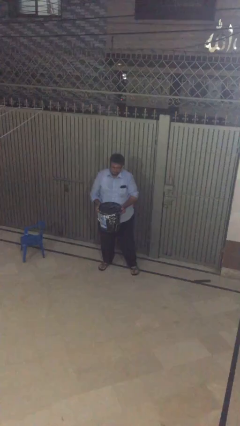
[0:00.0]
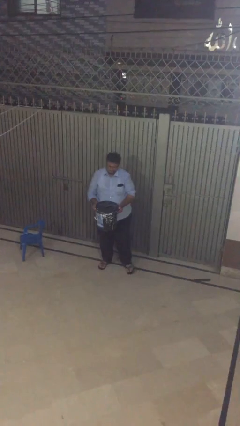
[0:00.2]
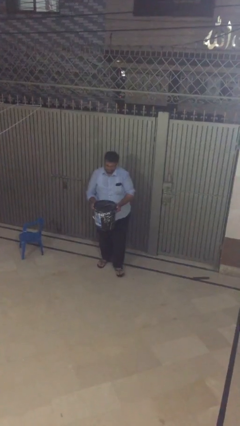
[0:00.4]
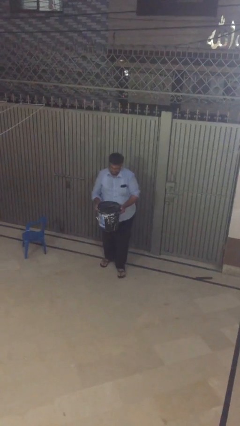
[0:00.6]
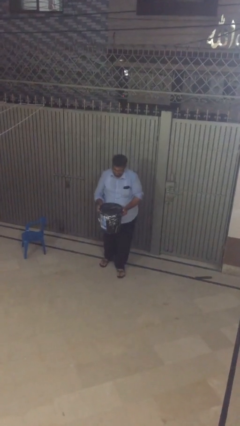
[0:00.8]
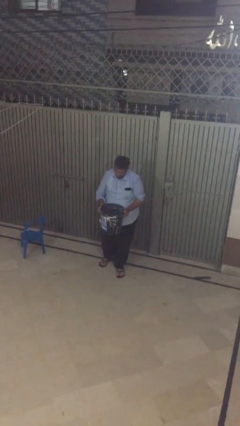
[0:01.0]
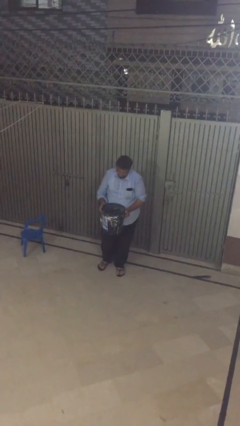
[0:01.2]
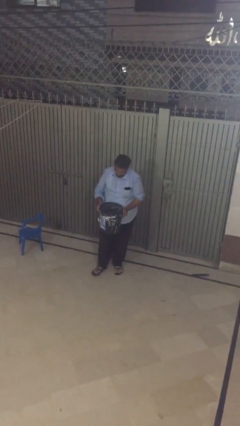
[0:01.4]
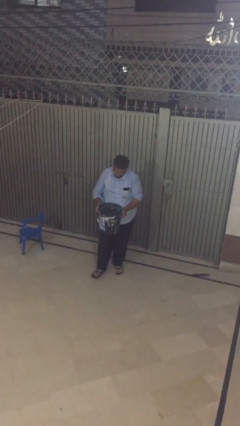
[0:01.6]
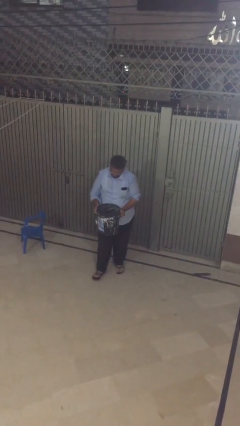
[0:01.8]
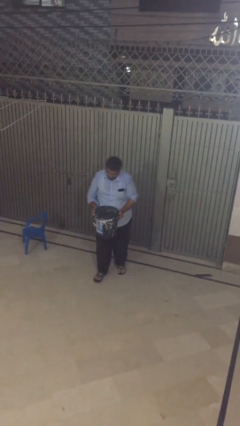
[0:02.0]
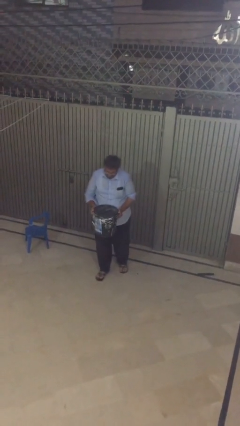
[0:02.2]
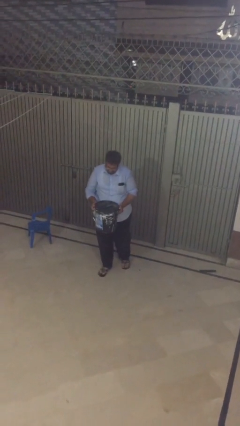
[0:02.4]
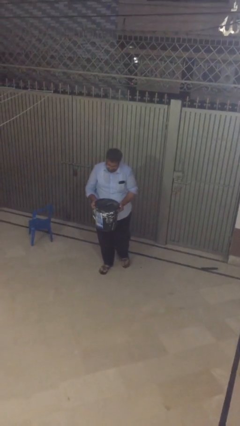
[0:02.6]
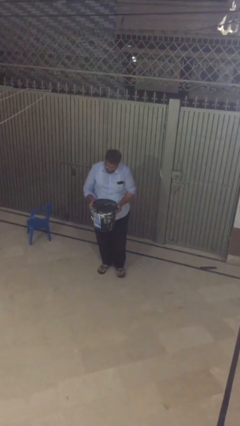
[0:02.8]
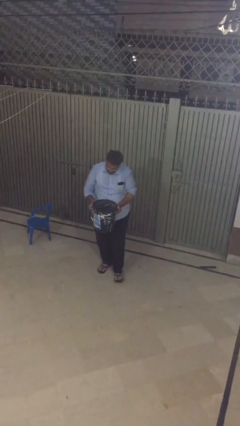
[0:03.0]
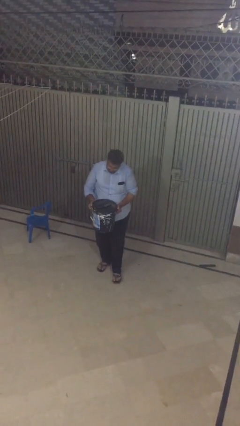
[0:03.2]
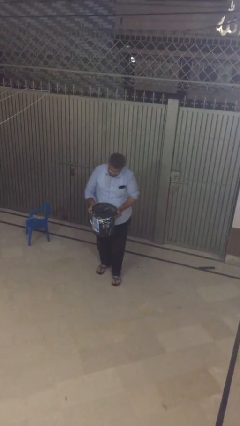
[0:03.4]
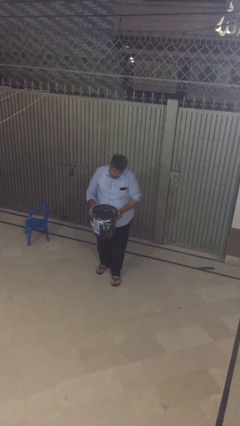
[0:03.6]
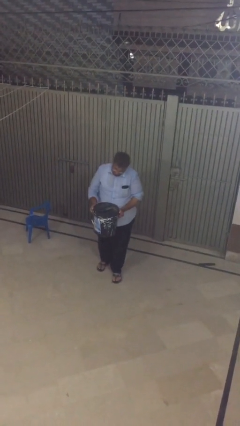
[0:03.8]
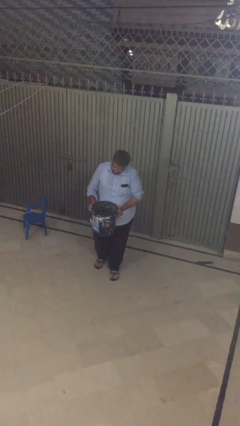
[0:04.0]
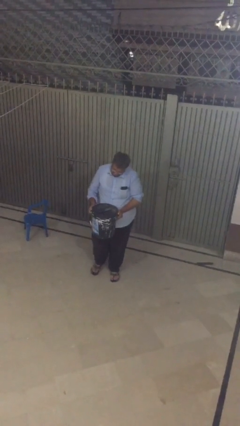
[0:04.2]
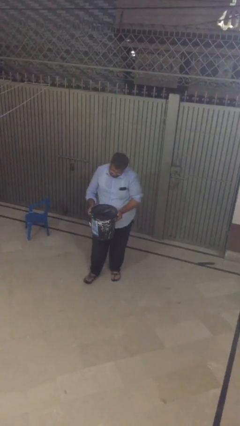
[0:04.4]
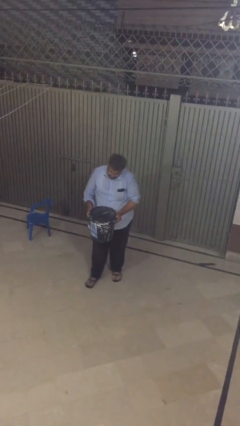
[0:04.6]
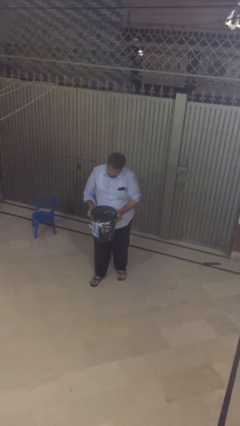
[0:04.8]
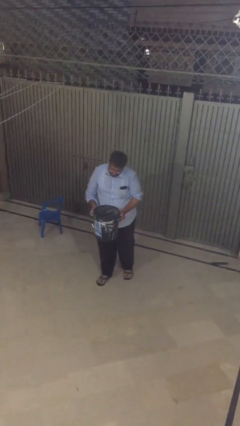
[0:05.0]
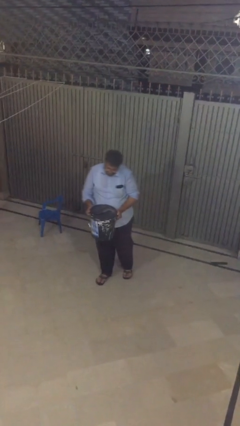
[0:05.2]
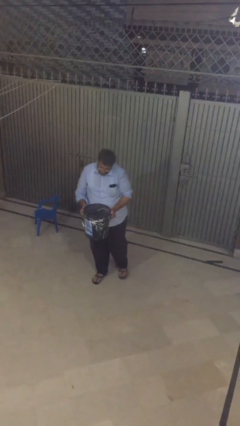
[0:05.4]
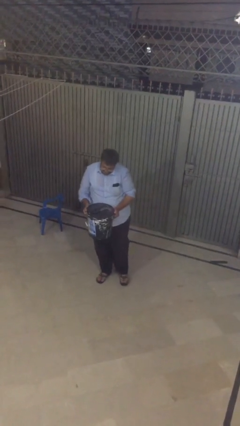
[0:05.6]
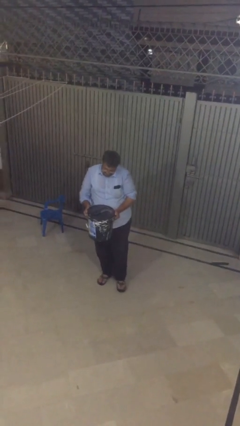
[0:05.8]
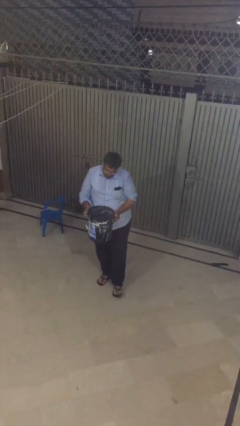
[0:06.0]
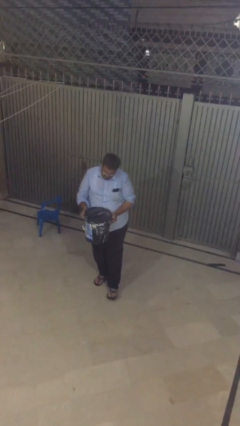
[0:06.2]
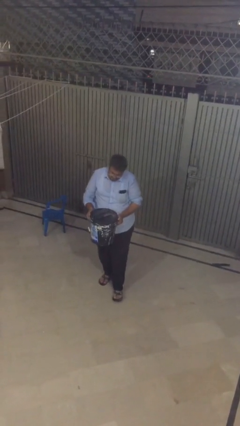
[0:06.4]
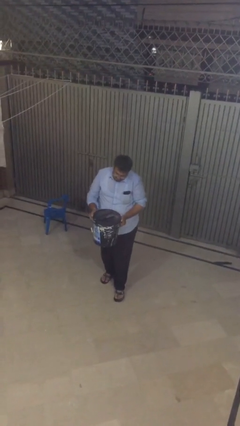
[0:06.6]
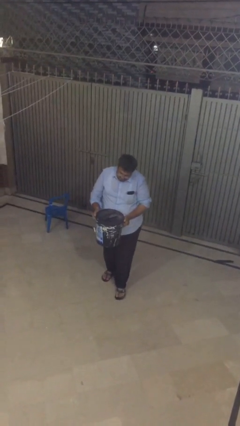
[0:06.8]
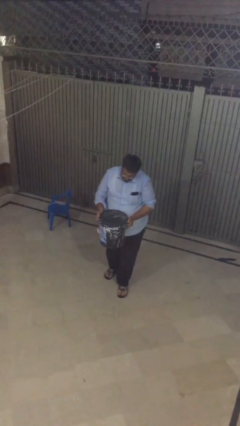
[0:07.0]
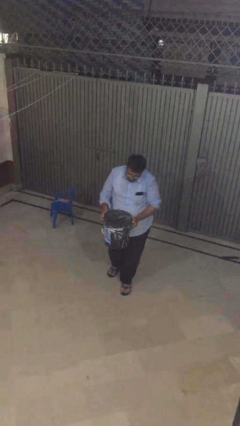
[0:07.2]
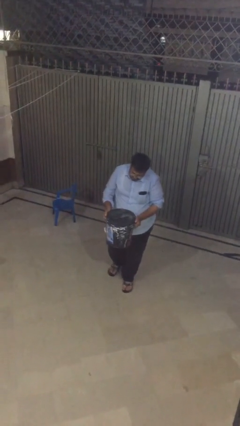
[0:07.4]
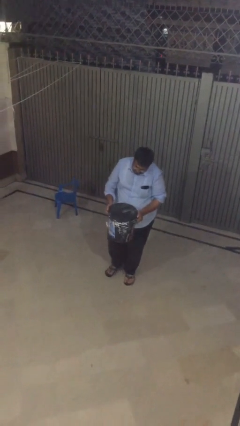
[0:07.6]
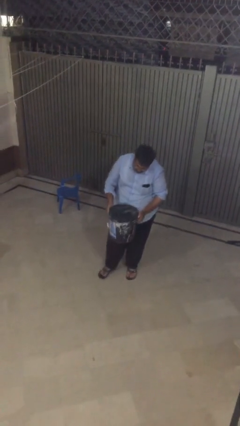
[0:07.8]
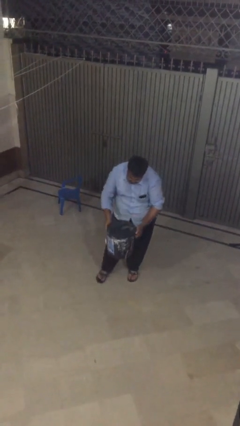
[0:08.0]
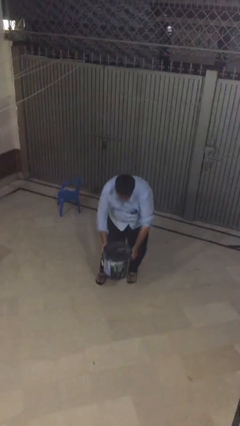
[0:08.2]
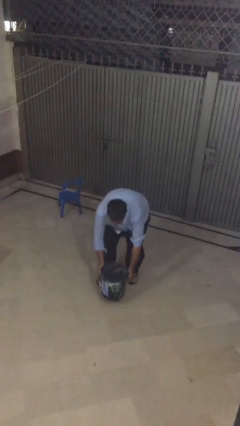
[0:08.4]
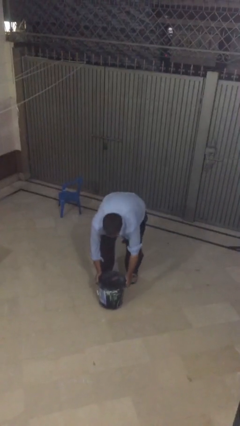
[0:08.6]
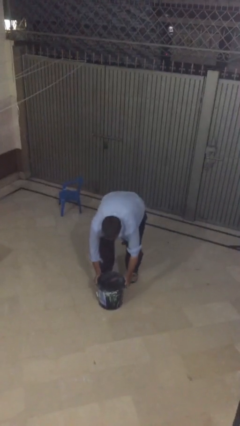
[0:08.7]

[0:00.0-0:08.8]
person carries heavy object

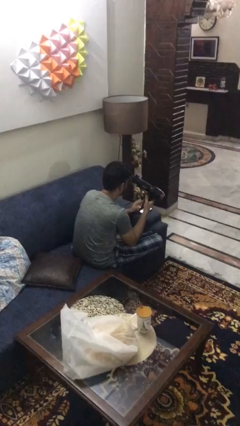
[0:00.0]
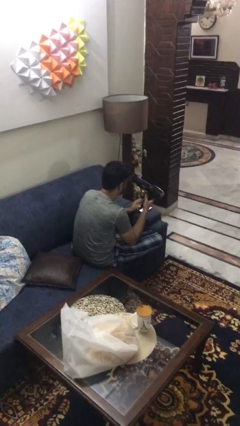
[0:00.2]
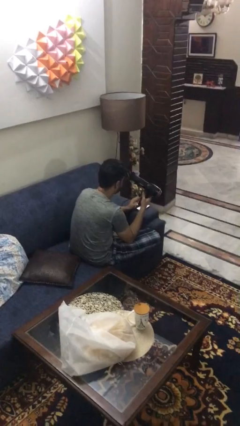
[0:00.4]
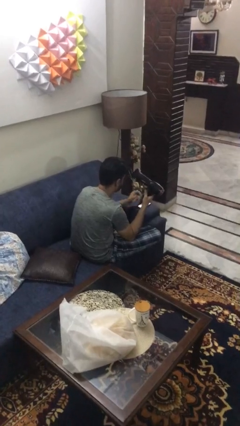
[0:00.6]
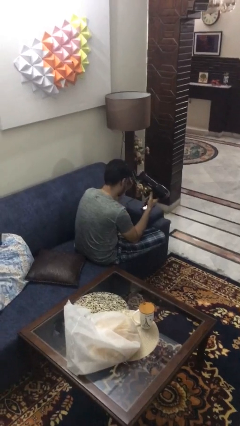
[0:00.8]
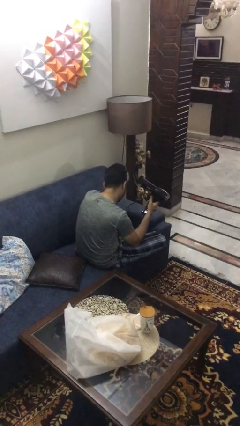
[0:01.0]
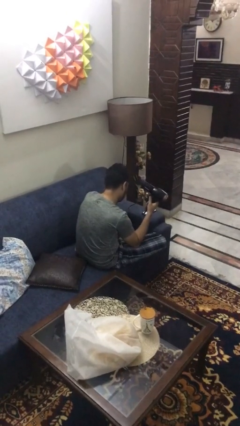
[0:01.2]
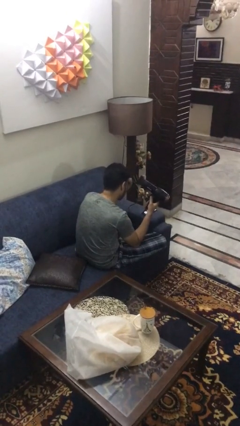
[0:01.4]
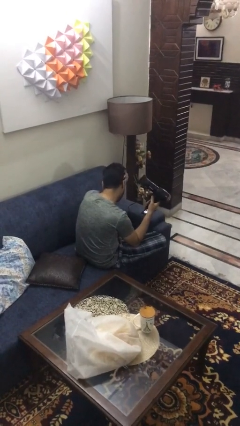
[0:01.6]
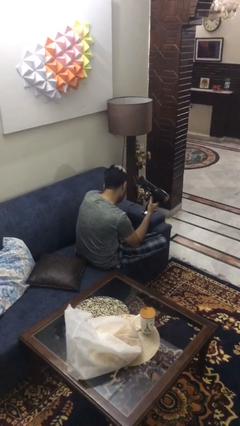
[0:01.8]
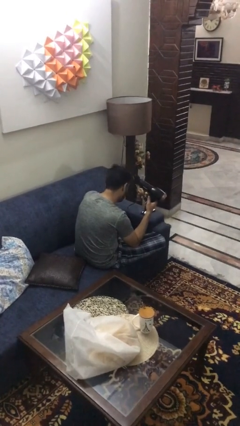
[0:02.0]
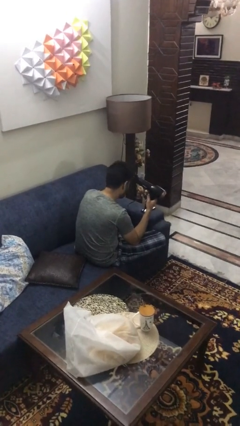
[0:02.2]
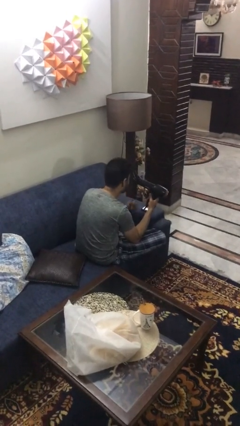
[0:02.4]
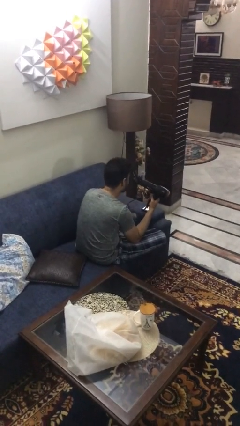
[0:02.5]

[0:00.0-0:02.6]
person dries hair with hairdryer

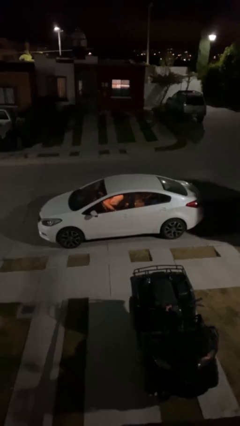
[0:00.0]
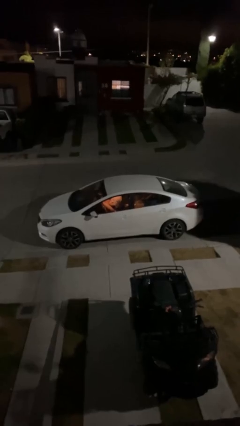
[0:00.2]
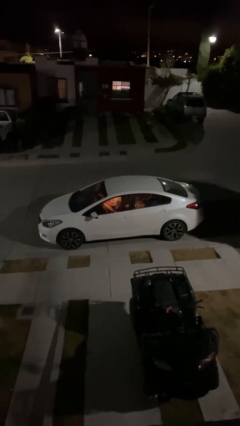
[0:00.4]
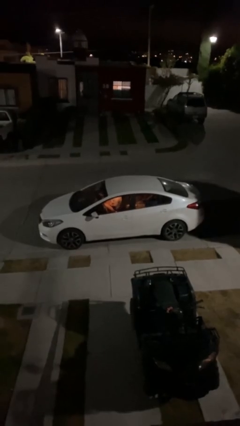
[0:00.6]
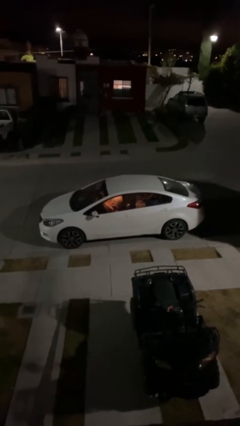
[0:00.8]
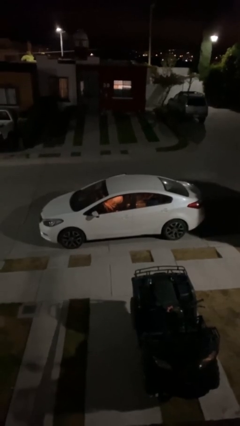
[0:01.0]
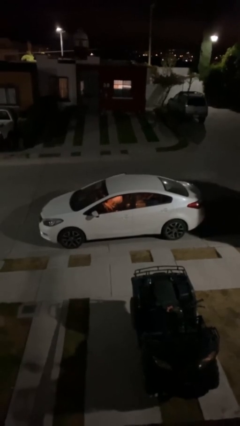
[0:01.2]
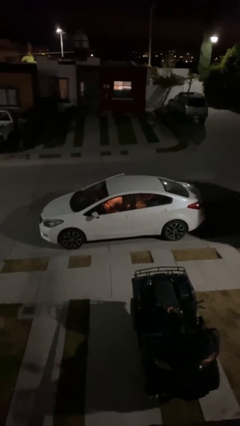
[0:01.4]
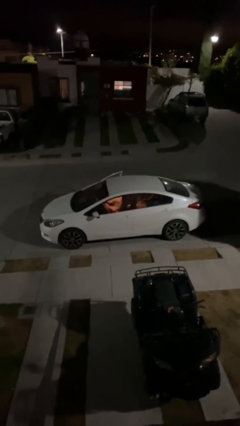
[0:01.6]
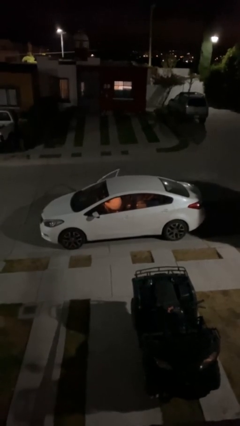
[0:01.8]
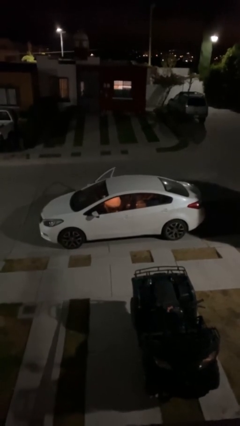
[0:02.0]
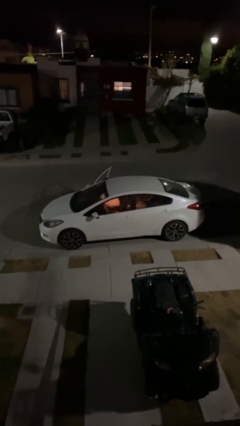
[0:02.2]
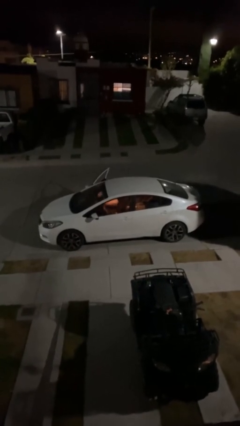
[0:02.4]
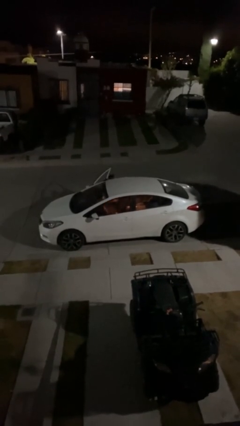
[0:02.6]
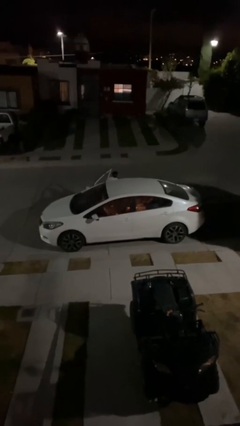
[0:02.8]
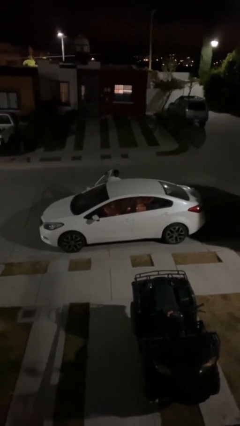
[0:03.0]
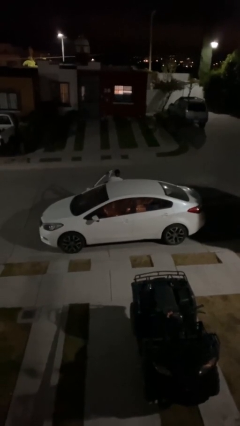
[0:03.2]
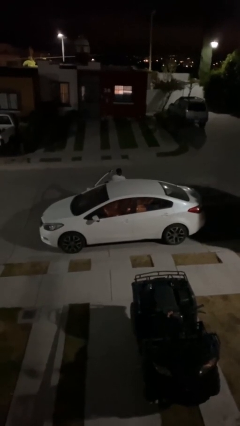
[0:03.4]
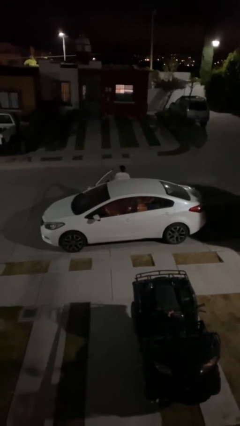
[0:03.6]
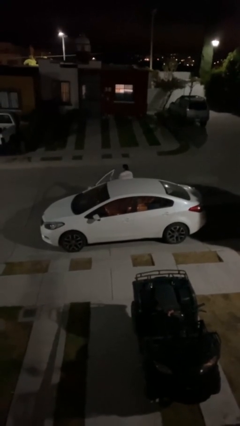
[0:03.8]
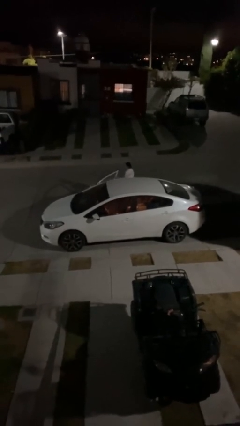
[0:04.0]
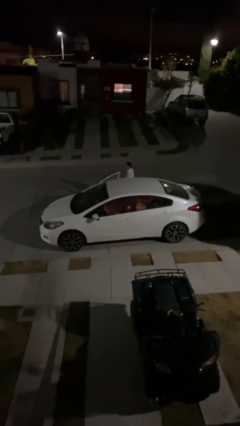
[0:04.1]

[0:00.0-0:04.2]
car drops off person

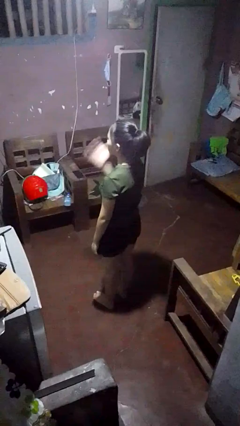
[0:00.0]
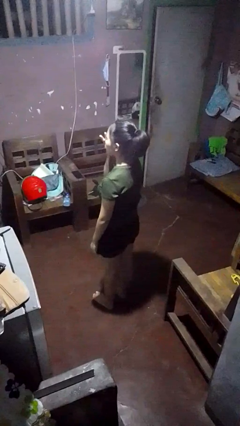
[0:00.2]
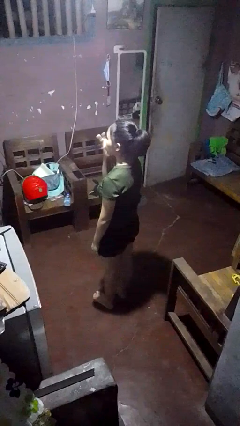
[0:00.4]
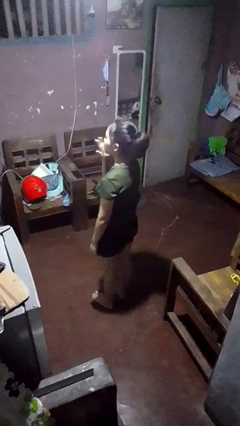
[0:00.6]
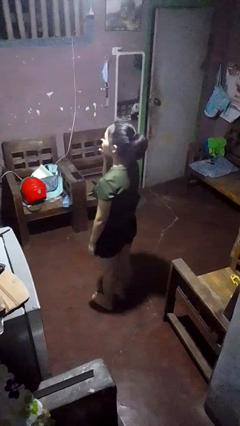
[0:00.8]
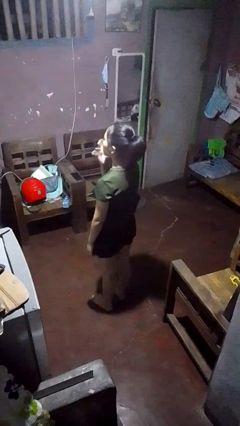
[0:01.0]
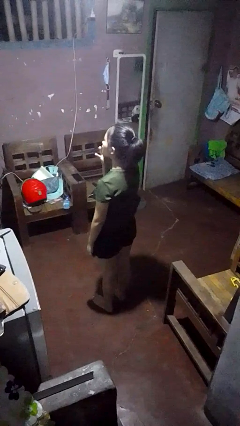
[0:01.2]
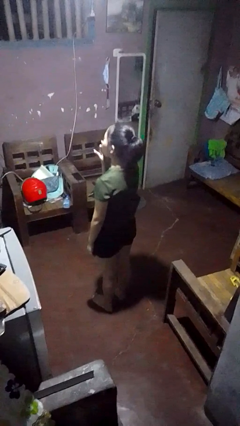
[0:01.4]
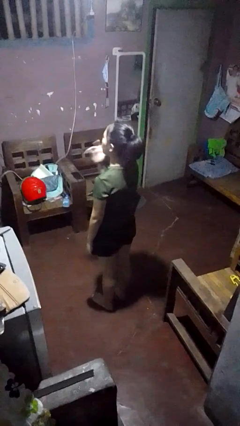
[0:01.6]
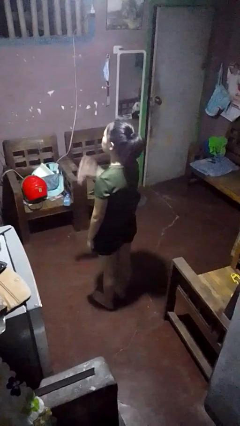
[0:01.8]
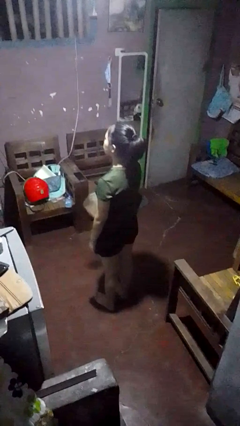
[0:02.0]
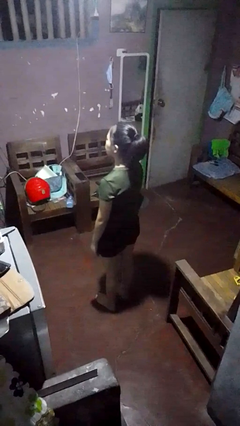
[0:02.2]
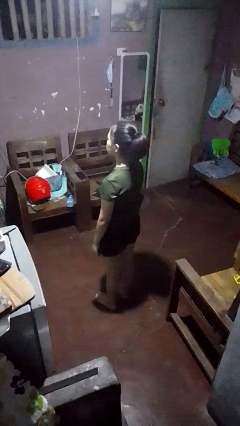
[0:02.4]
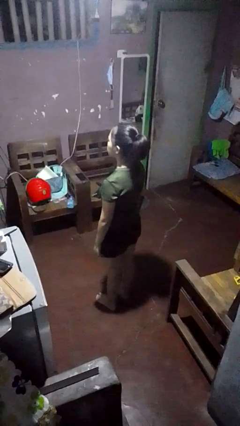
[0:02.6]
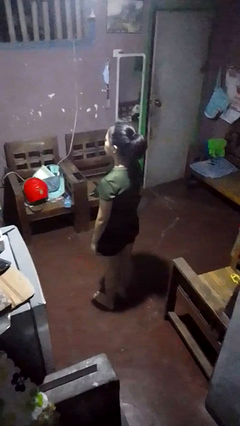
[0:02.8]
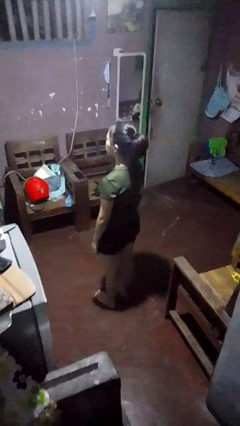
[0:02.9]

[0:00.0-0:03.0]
person licks fingers
